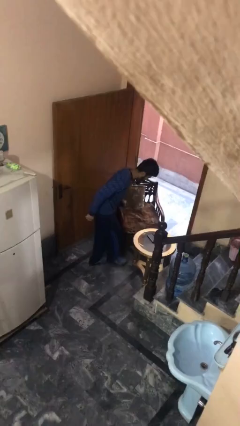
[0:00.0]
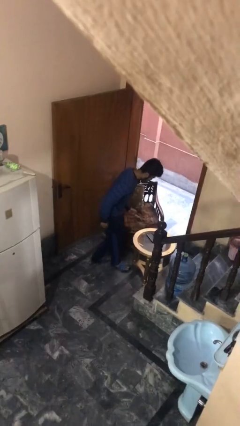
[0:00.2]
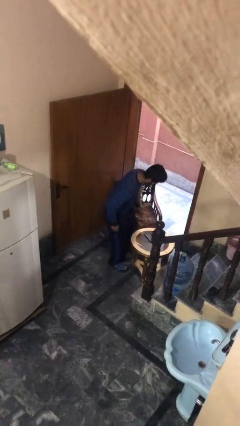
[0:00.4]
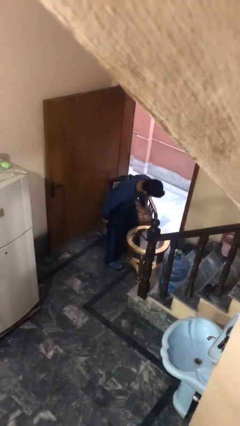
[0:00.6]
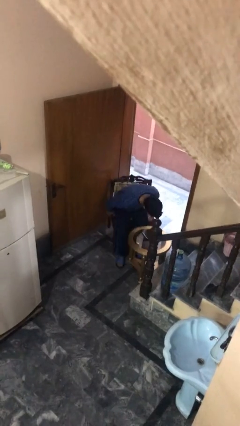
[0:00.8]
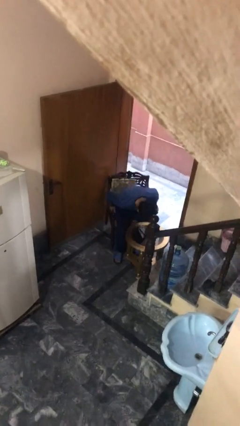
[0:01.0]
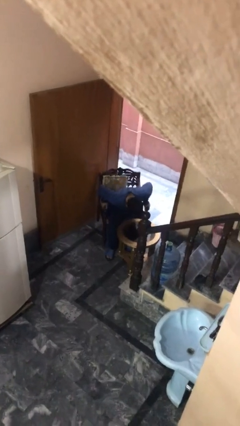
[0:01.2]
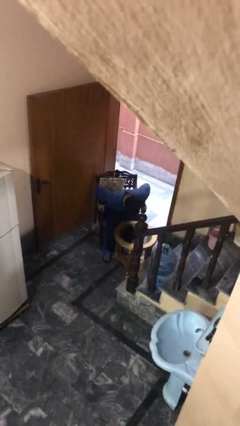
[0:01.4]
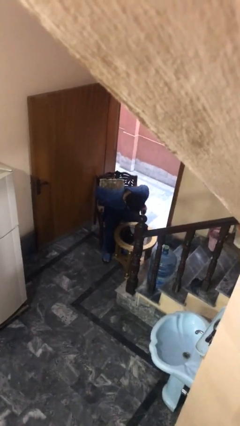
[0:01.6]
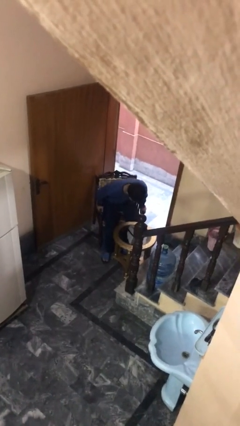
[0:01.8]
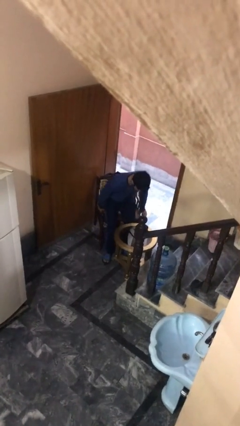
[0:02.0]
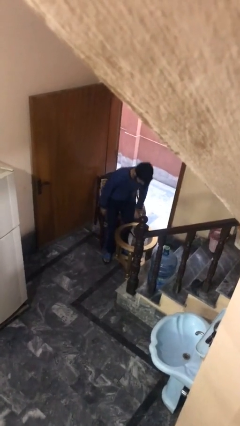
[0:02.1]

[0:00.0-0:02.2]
person sits down

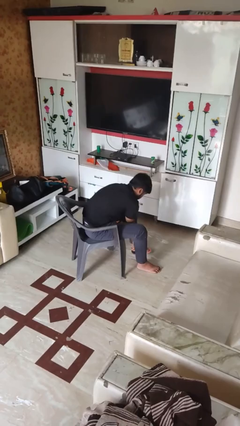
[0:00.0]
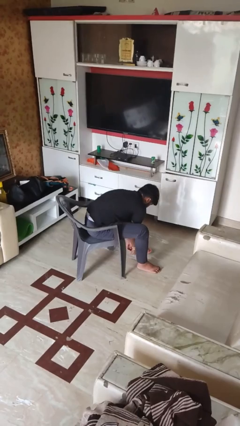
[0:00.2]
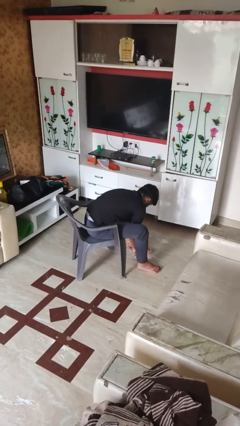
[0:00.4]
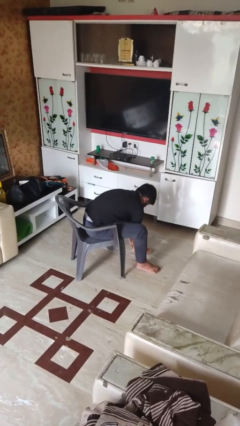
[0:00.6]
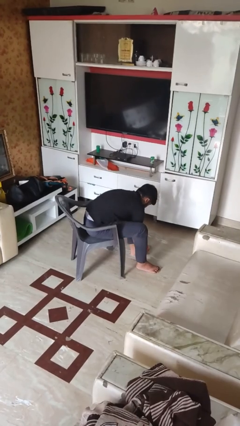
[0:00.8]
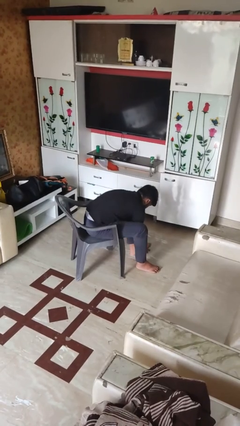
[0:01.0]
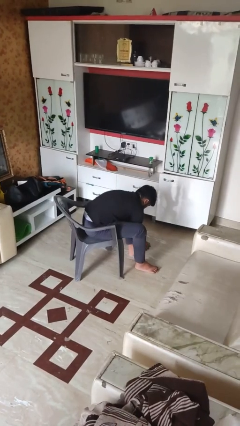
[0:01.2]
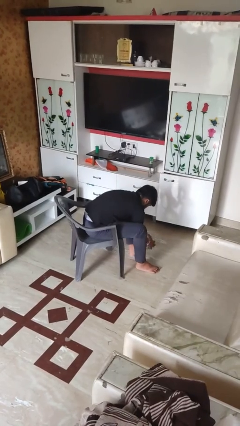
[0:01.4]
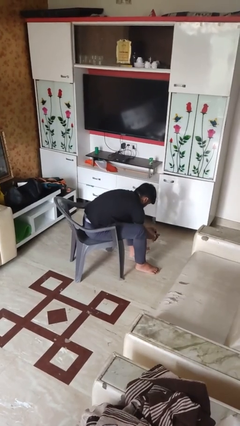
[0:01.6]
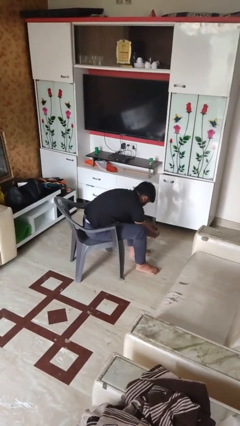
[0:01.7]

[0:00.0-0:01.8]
person takes off socks

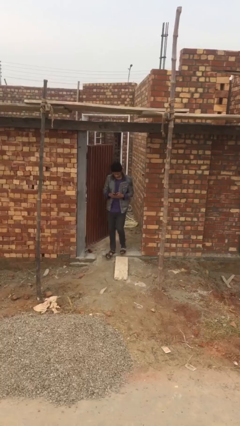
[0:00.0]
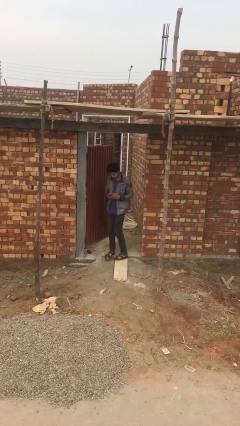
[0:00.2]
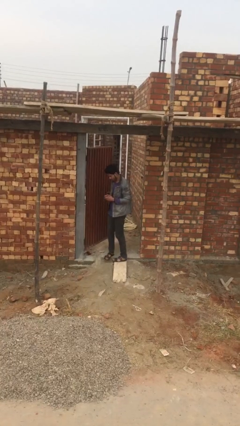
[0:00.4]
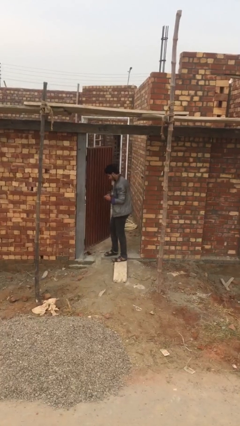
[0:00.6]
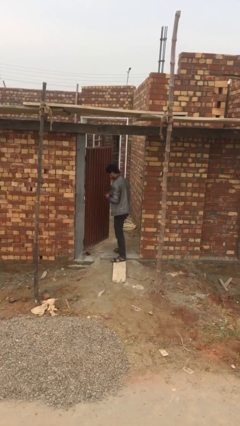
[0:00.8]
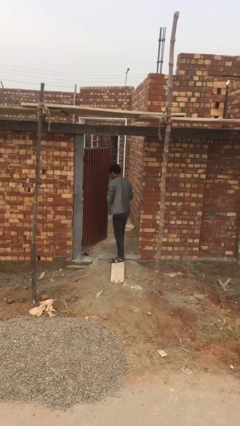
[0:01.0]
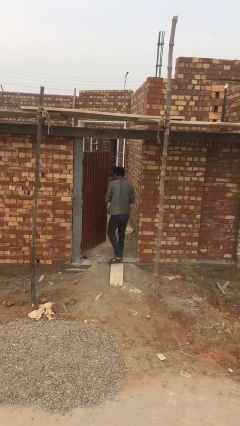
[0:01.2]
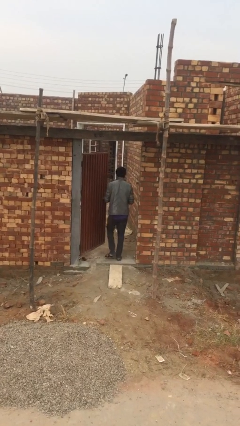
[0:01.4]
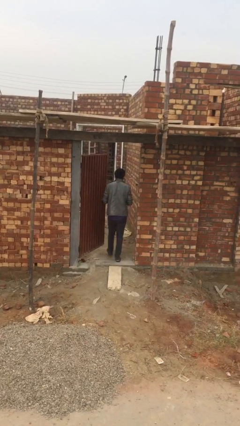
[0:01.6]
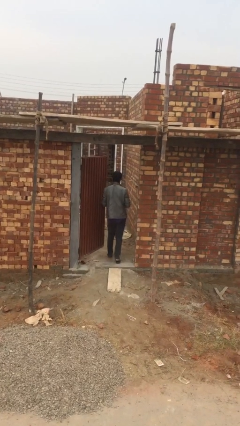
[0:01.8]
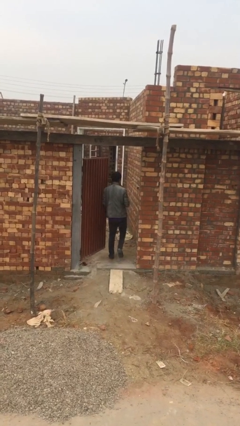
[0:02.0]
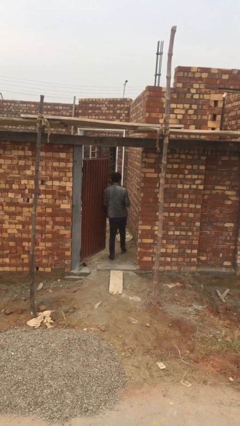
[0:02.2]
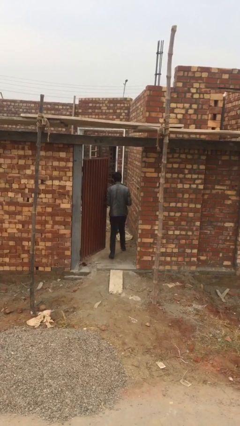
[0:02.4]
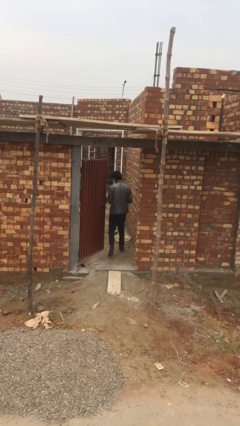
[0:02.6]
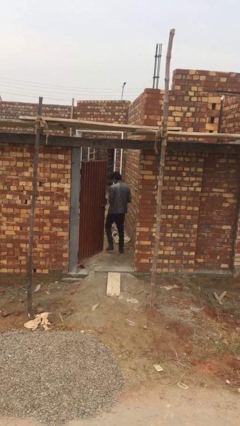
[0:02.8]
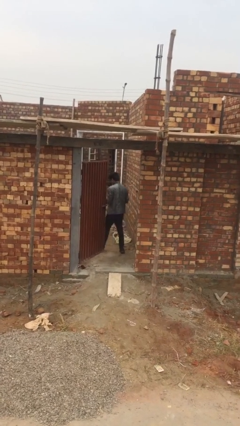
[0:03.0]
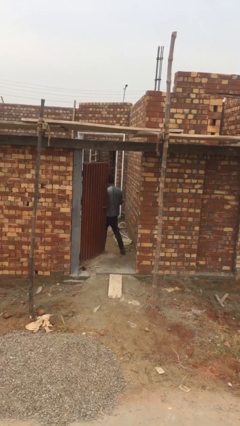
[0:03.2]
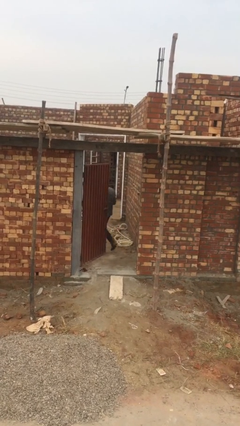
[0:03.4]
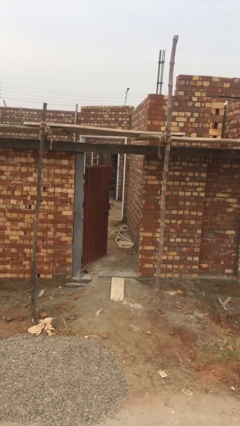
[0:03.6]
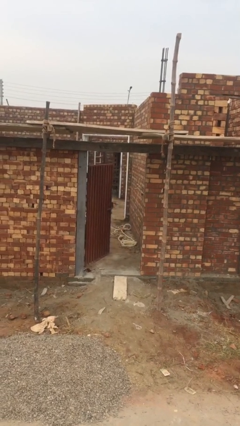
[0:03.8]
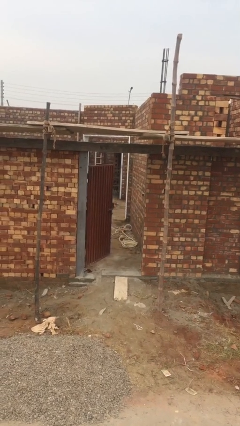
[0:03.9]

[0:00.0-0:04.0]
person exits scene through structure

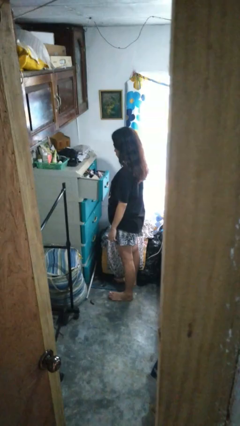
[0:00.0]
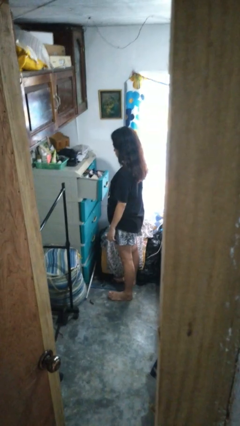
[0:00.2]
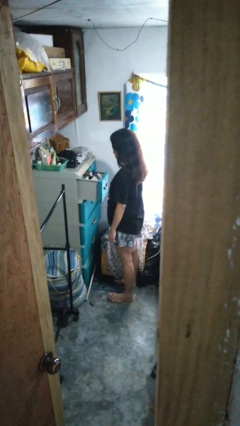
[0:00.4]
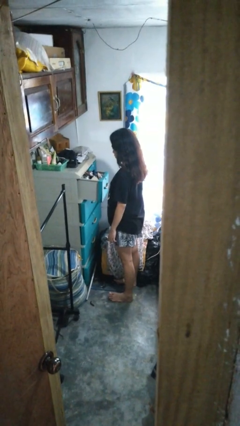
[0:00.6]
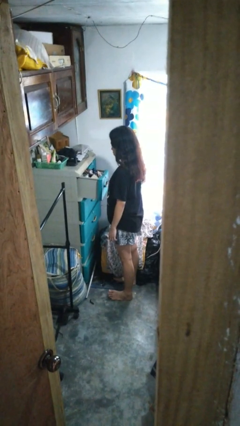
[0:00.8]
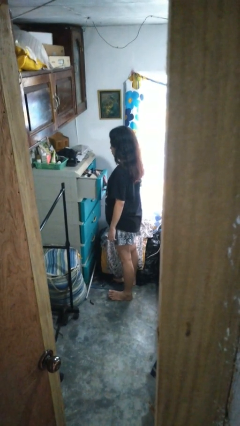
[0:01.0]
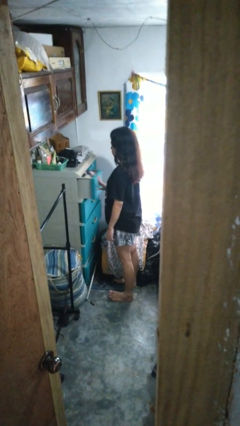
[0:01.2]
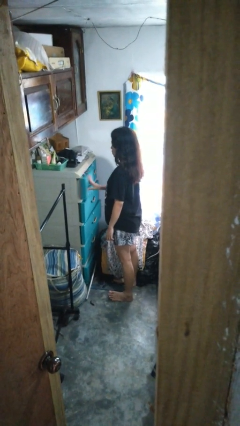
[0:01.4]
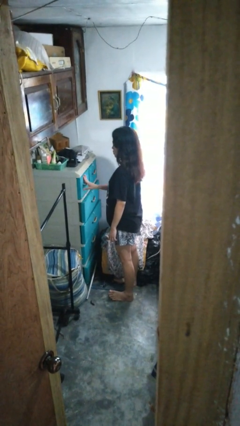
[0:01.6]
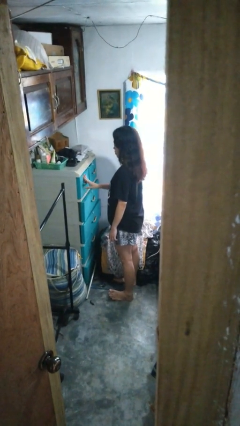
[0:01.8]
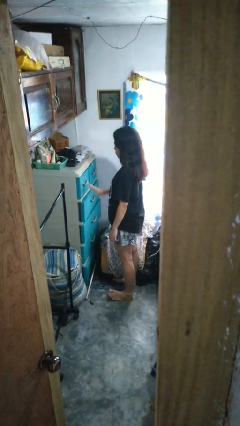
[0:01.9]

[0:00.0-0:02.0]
person closes dresser drawer

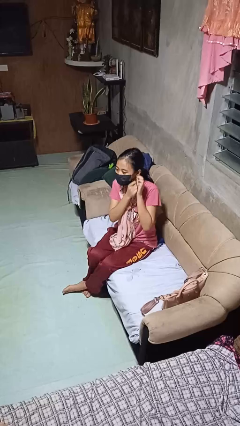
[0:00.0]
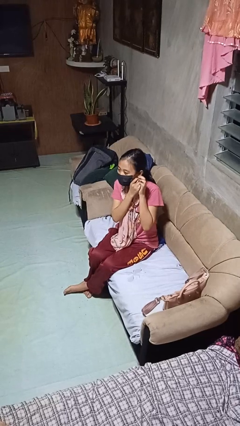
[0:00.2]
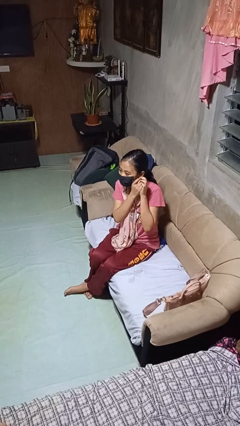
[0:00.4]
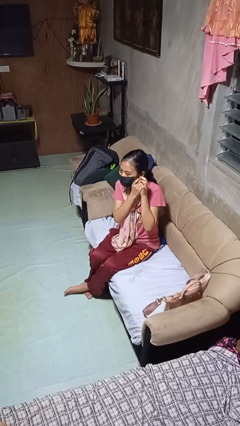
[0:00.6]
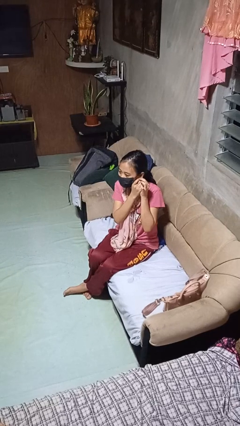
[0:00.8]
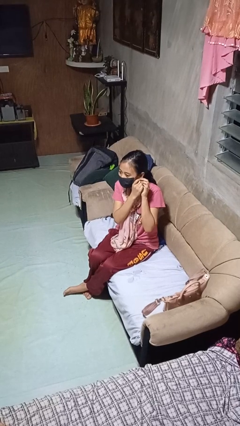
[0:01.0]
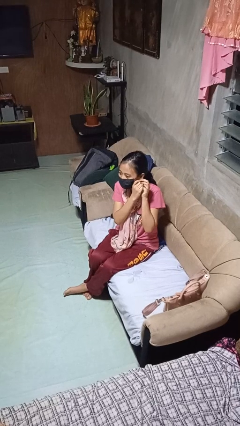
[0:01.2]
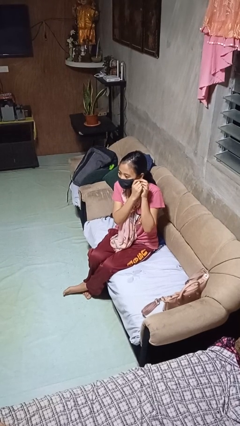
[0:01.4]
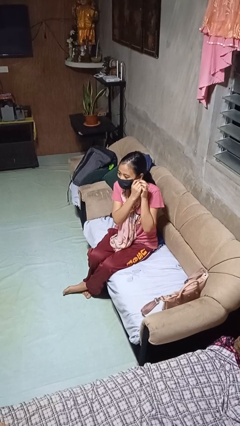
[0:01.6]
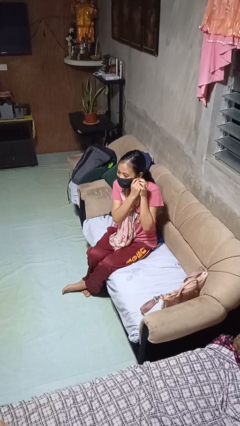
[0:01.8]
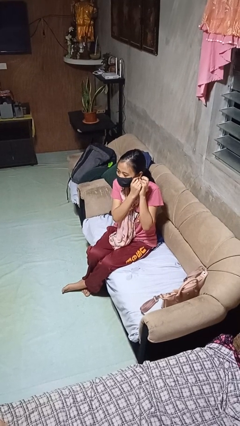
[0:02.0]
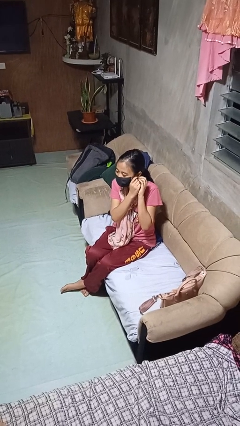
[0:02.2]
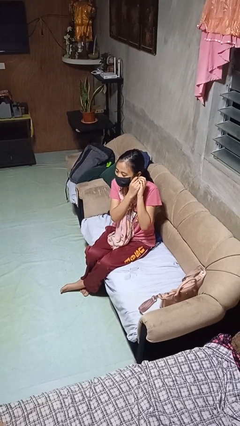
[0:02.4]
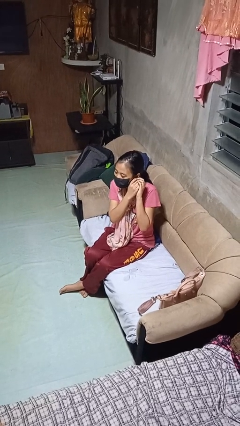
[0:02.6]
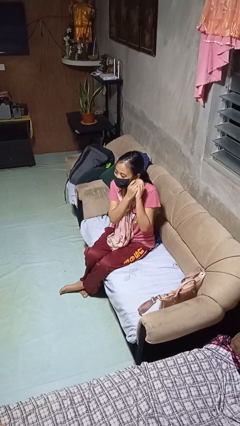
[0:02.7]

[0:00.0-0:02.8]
person puts on earrings

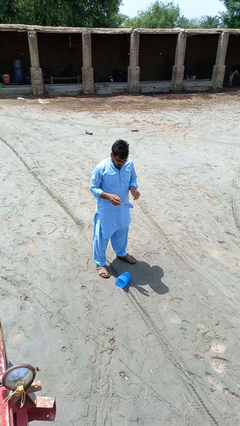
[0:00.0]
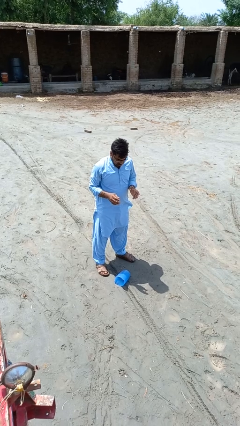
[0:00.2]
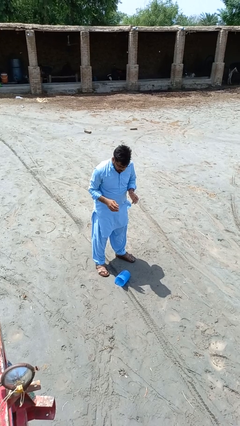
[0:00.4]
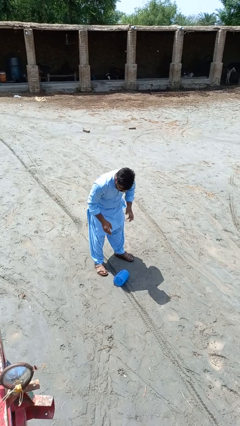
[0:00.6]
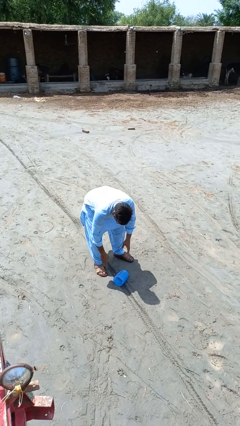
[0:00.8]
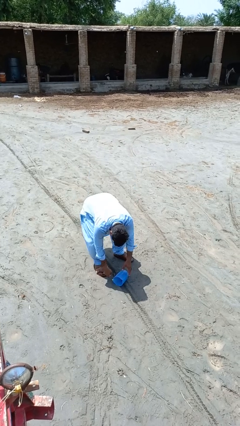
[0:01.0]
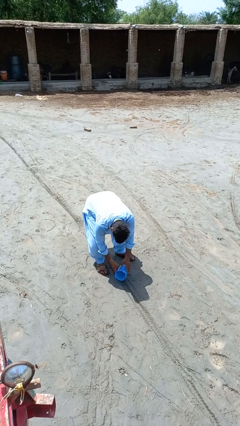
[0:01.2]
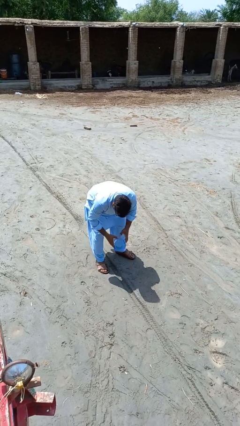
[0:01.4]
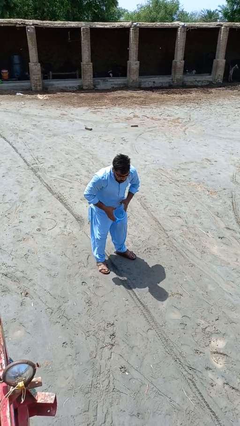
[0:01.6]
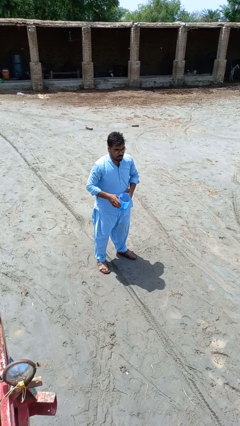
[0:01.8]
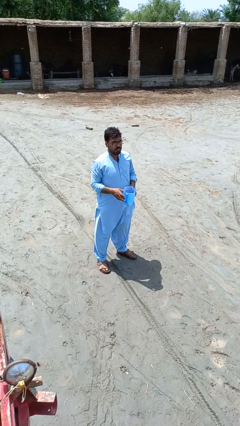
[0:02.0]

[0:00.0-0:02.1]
person picks up object from floor

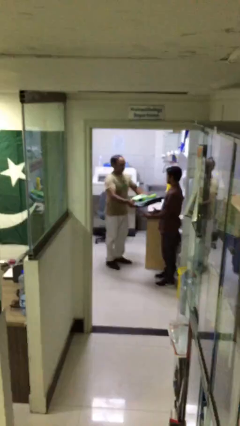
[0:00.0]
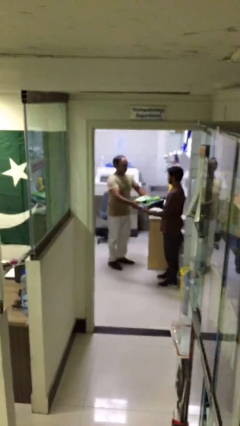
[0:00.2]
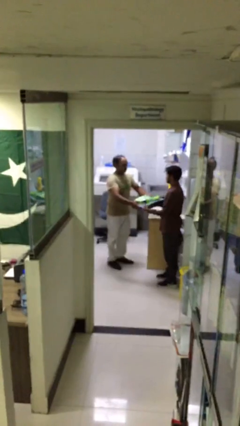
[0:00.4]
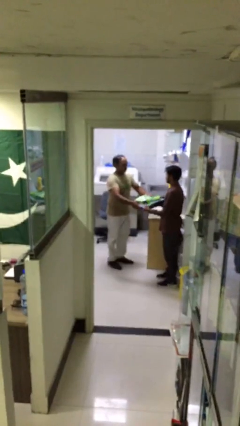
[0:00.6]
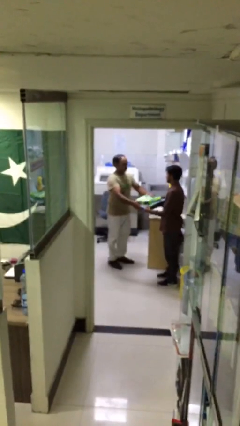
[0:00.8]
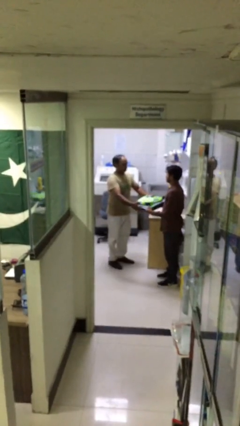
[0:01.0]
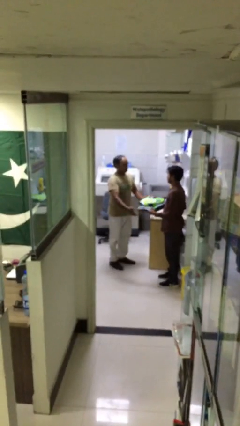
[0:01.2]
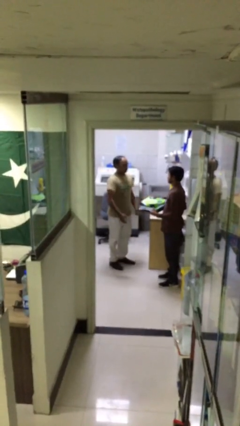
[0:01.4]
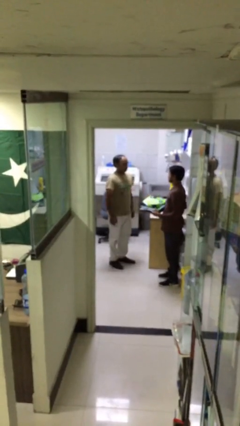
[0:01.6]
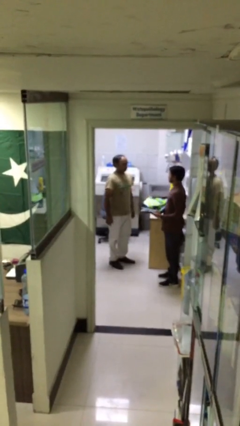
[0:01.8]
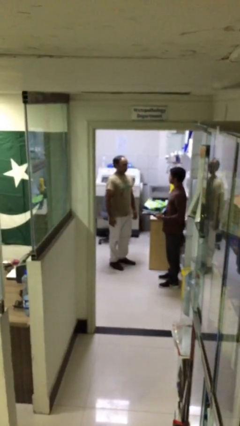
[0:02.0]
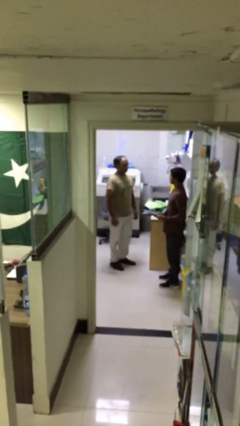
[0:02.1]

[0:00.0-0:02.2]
person transfers object to person

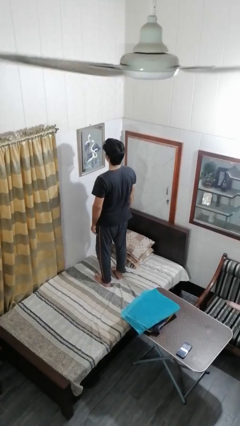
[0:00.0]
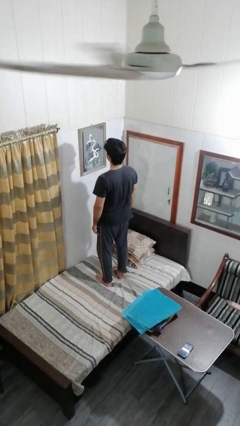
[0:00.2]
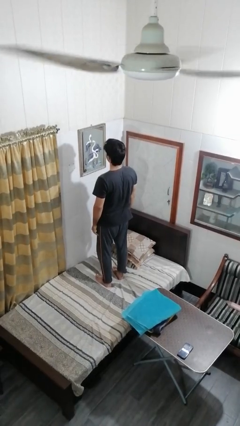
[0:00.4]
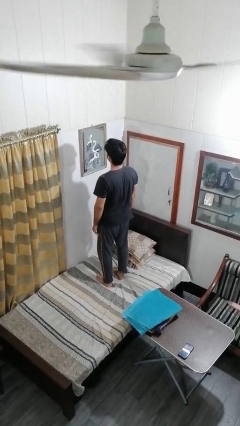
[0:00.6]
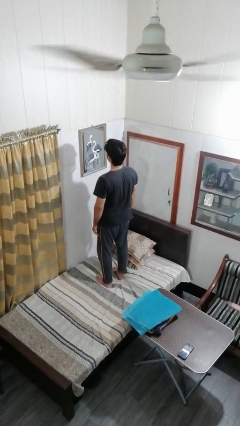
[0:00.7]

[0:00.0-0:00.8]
person puts up picture frame
